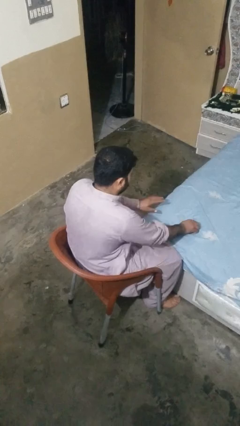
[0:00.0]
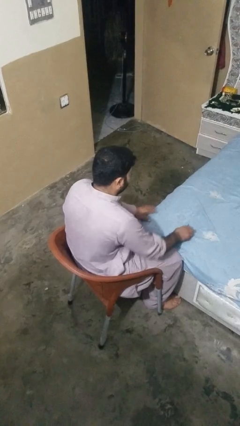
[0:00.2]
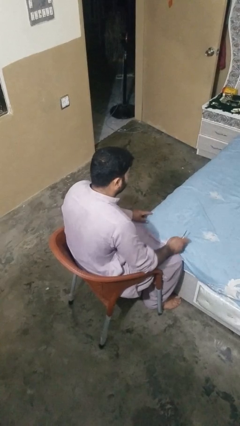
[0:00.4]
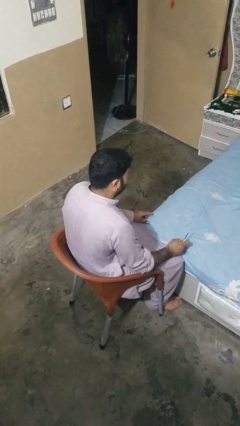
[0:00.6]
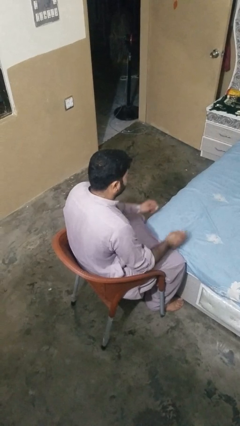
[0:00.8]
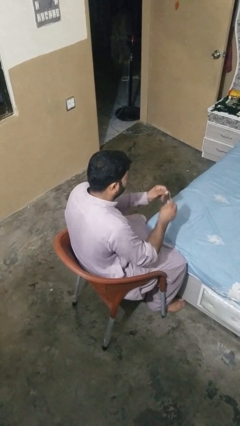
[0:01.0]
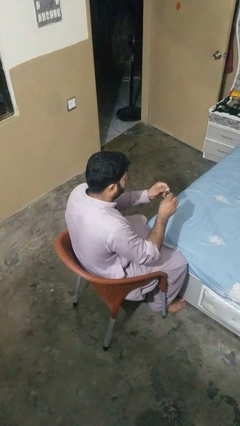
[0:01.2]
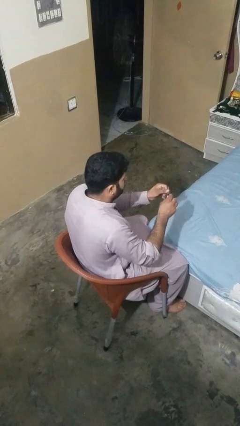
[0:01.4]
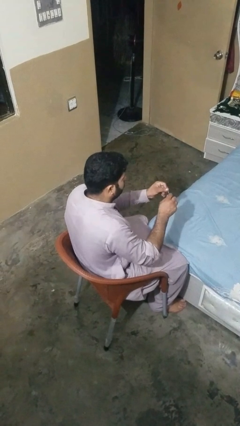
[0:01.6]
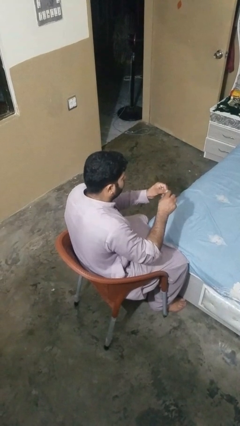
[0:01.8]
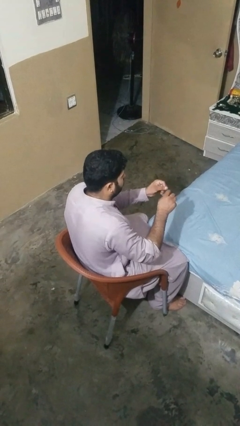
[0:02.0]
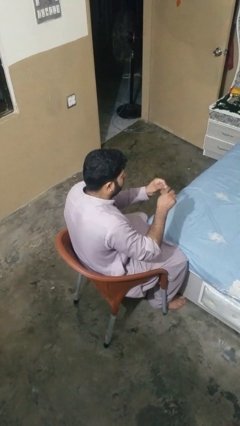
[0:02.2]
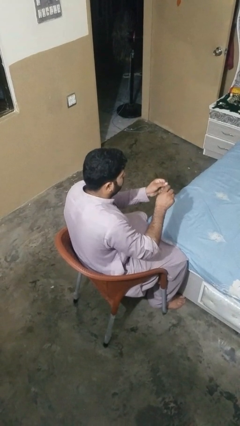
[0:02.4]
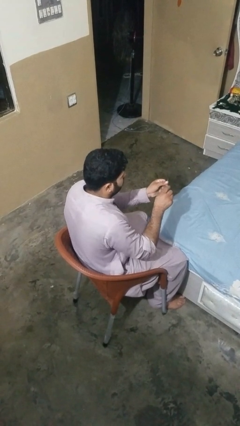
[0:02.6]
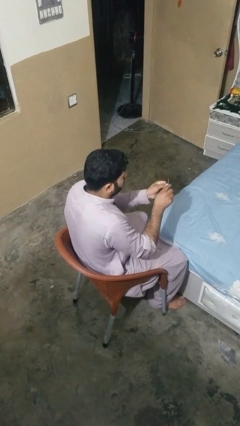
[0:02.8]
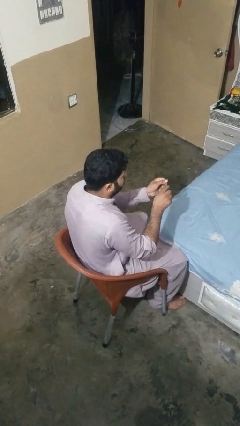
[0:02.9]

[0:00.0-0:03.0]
person files fingernails

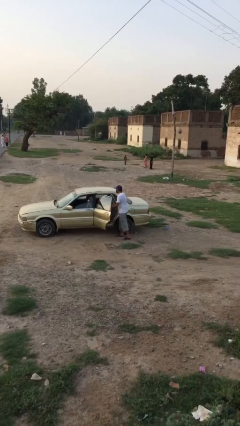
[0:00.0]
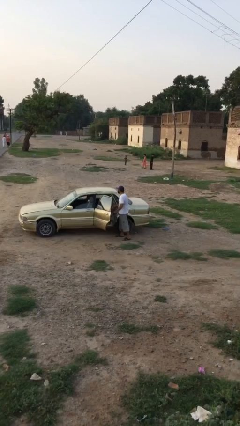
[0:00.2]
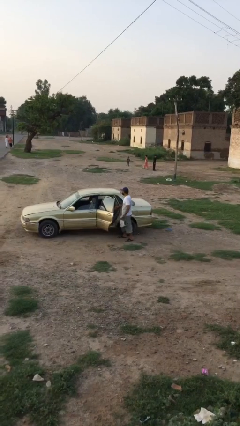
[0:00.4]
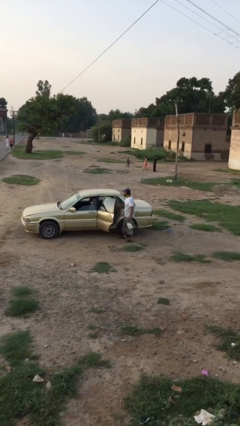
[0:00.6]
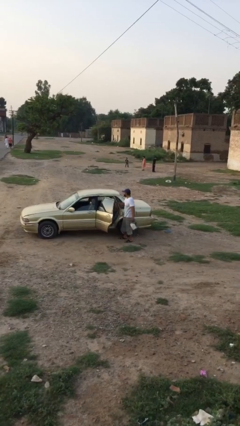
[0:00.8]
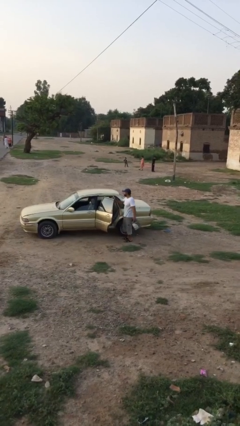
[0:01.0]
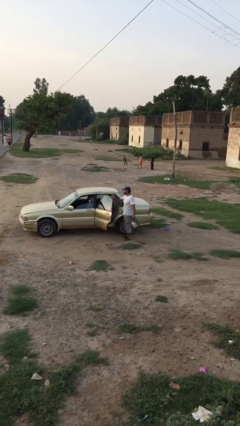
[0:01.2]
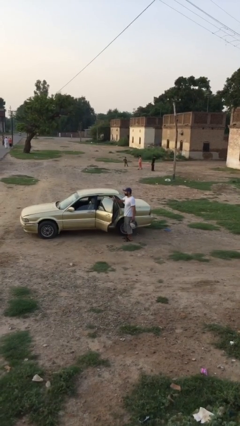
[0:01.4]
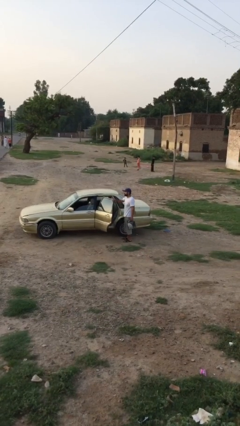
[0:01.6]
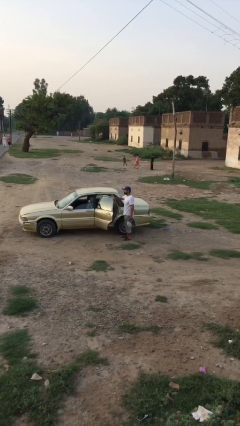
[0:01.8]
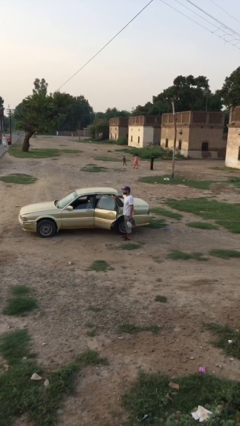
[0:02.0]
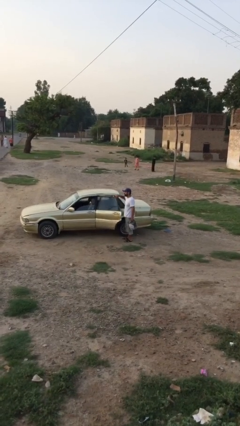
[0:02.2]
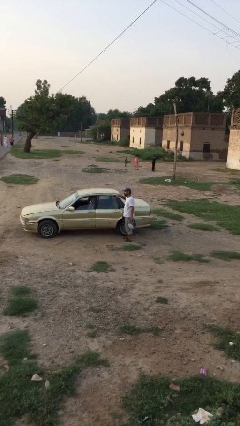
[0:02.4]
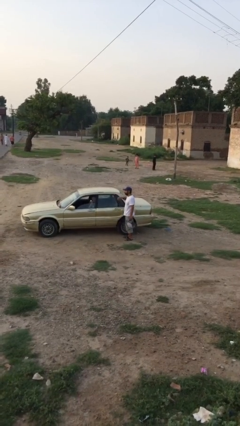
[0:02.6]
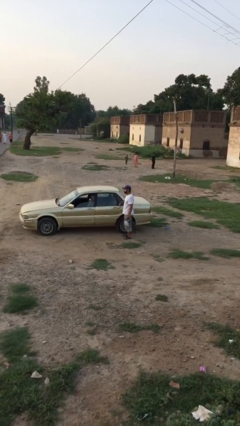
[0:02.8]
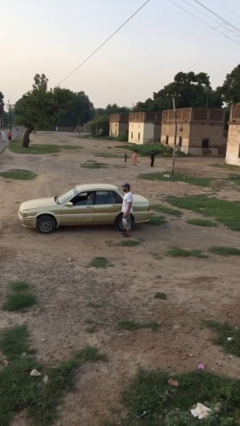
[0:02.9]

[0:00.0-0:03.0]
person closes car door

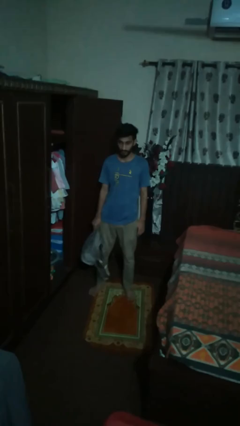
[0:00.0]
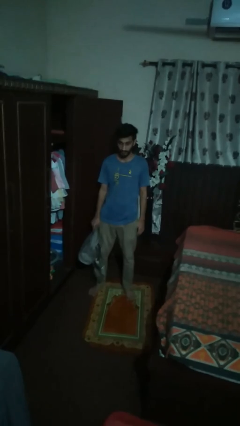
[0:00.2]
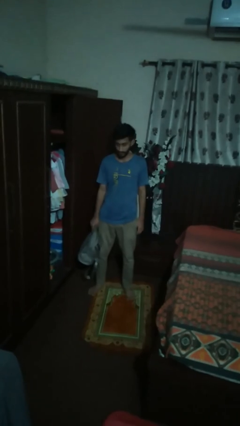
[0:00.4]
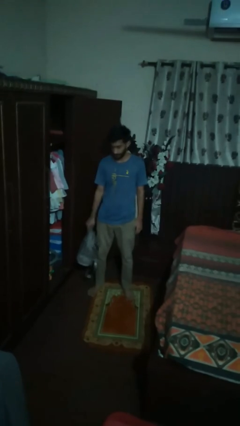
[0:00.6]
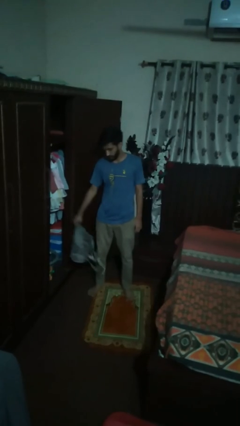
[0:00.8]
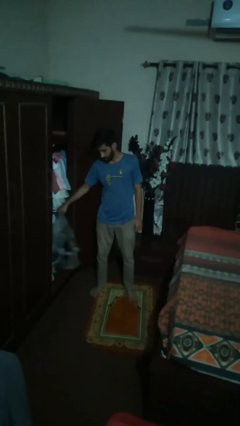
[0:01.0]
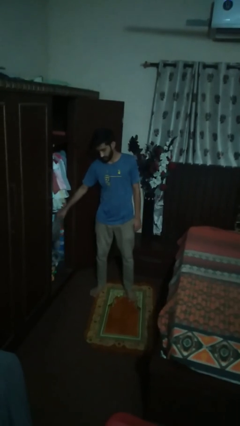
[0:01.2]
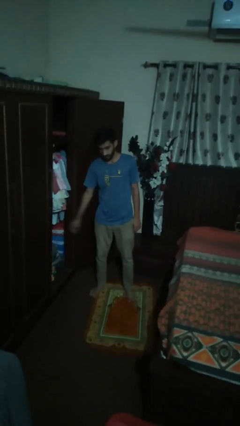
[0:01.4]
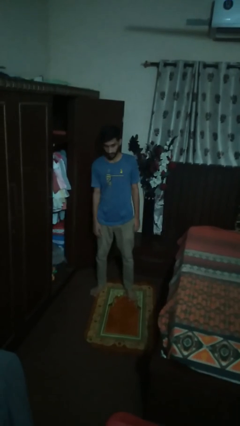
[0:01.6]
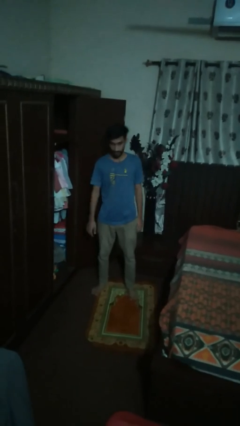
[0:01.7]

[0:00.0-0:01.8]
person puts down object into cabinet

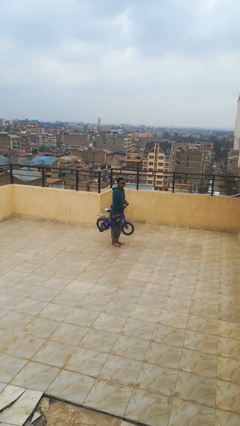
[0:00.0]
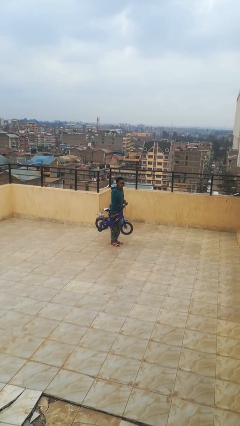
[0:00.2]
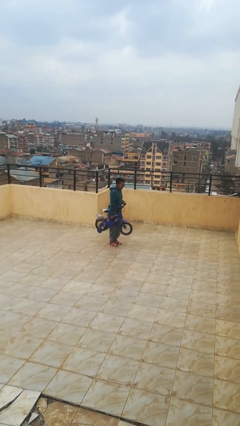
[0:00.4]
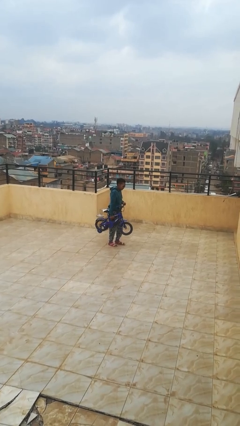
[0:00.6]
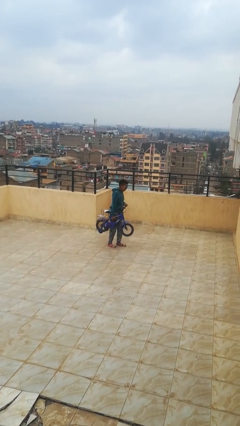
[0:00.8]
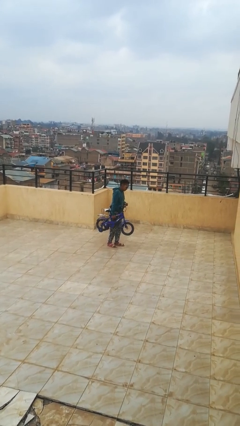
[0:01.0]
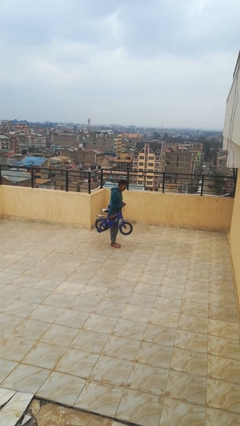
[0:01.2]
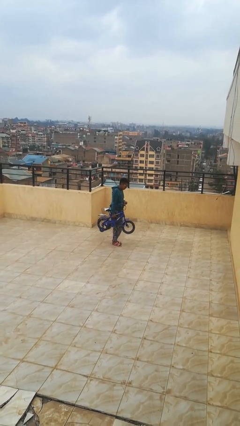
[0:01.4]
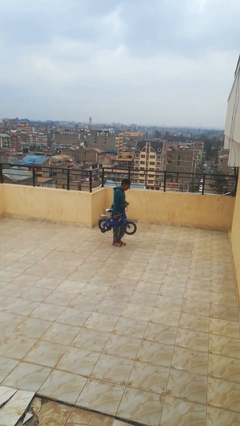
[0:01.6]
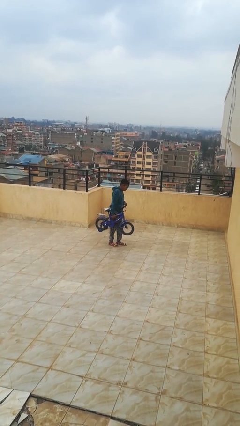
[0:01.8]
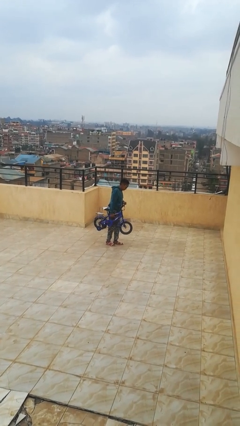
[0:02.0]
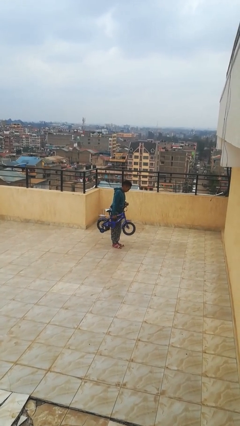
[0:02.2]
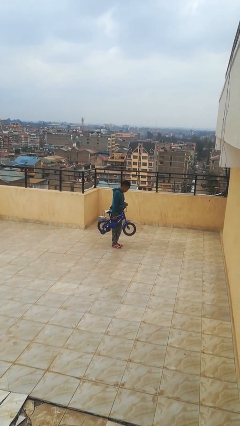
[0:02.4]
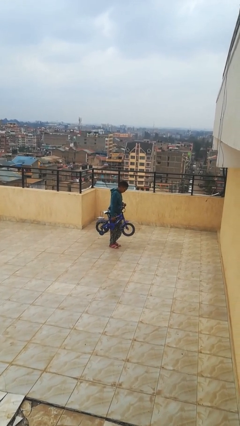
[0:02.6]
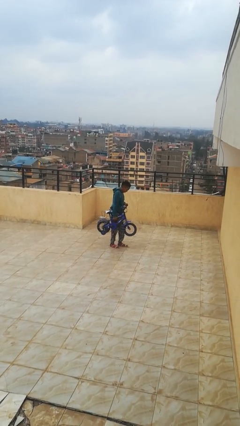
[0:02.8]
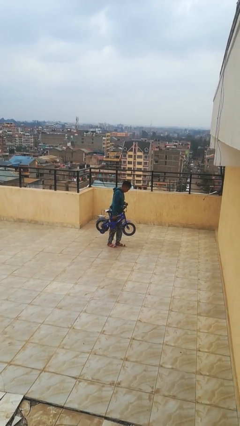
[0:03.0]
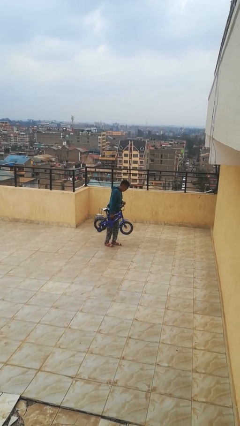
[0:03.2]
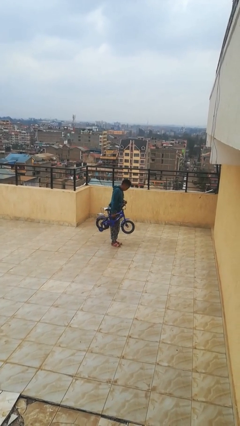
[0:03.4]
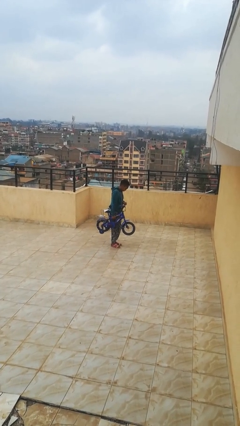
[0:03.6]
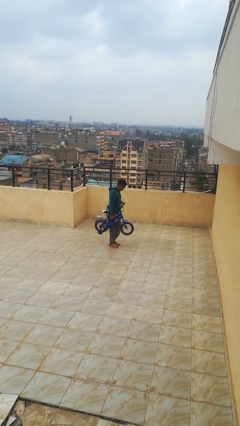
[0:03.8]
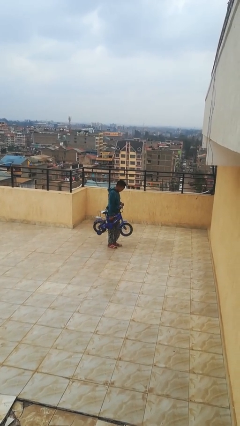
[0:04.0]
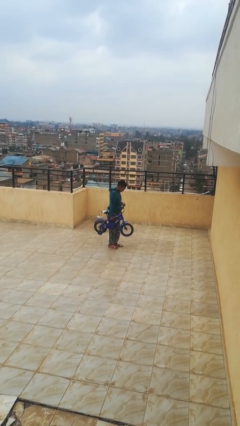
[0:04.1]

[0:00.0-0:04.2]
person carries bicycle

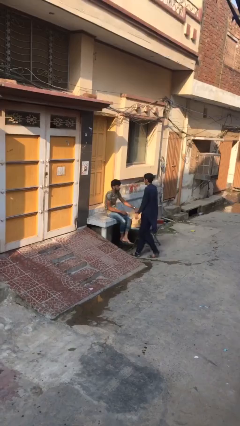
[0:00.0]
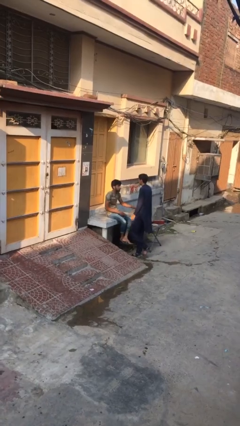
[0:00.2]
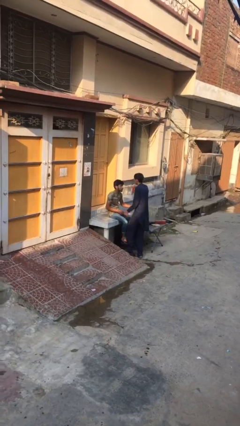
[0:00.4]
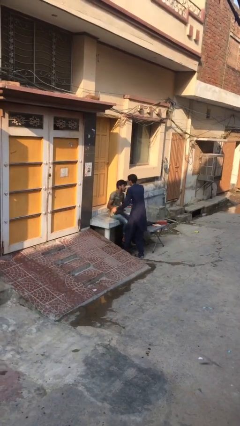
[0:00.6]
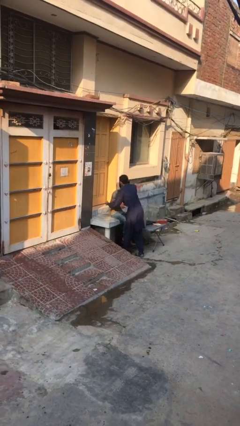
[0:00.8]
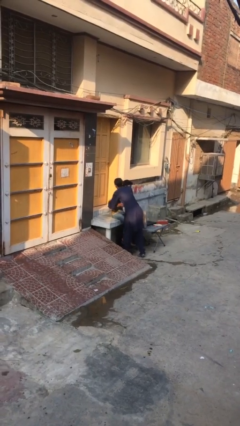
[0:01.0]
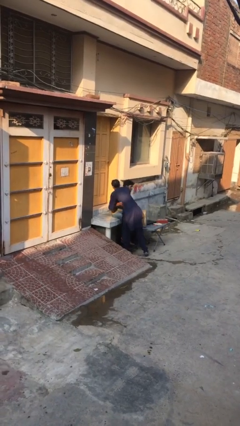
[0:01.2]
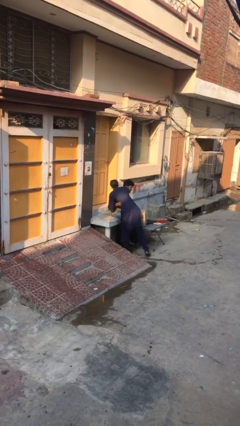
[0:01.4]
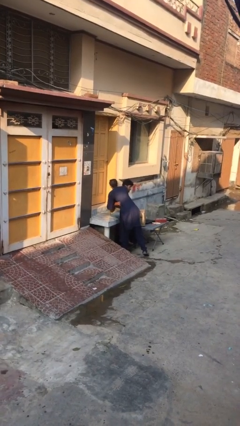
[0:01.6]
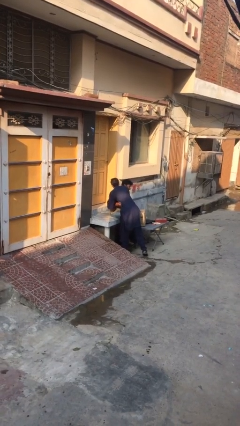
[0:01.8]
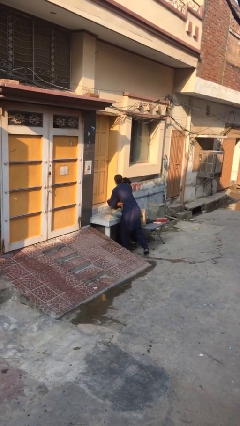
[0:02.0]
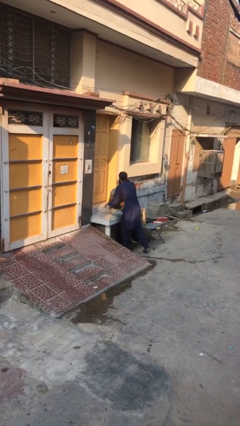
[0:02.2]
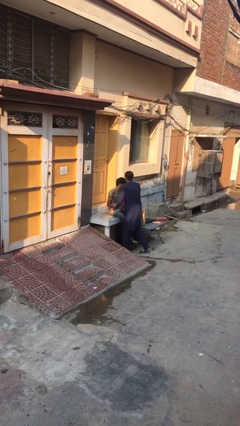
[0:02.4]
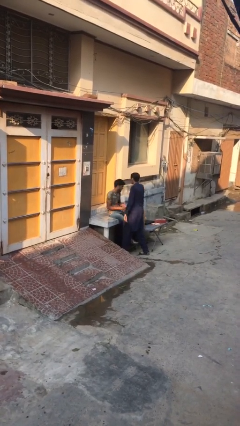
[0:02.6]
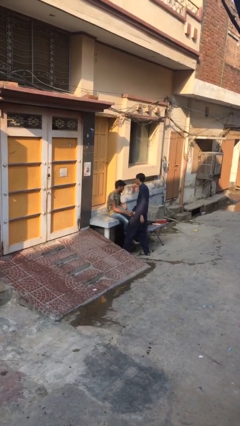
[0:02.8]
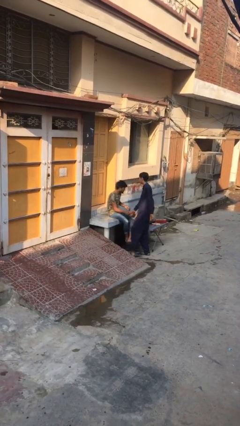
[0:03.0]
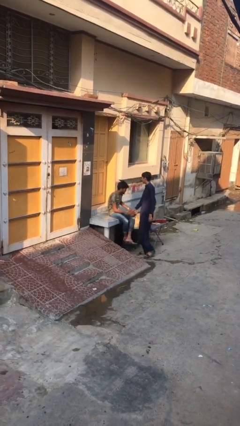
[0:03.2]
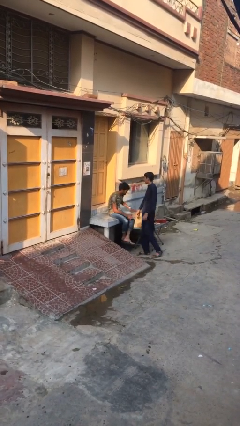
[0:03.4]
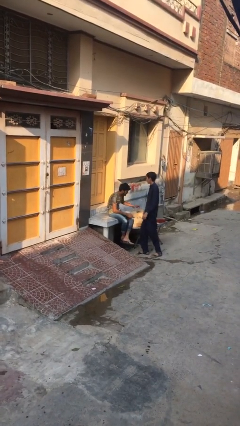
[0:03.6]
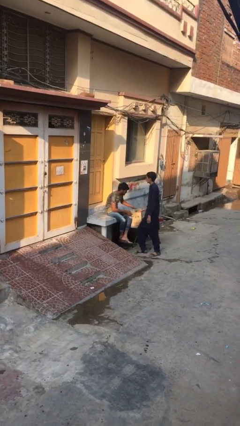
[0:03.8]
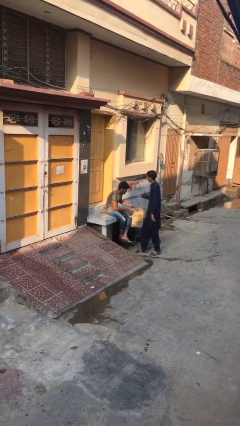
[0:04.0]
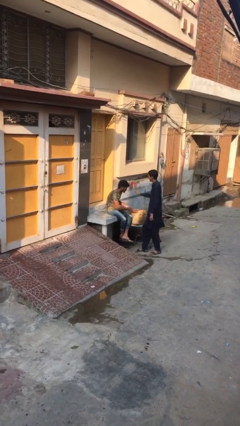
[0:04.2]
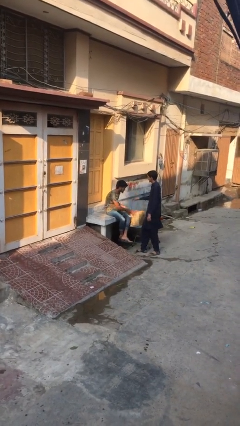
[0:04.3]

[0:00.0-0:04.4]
person embraces person

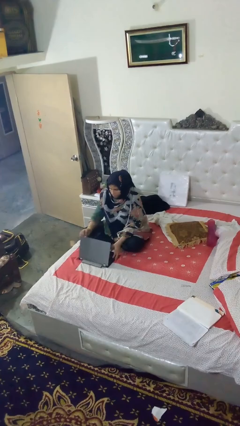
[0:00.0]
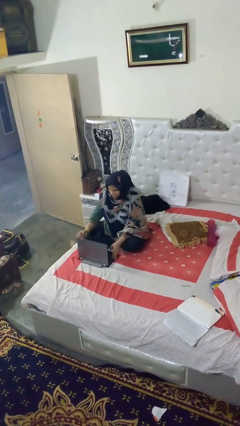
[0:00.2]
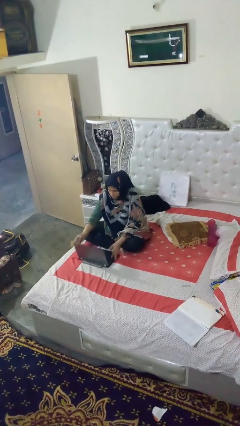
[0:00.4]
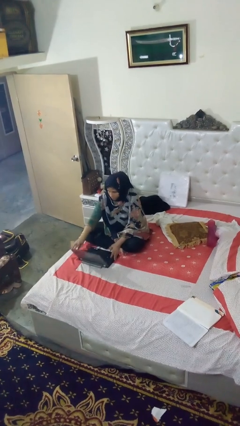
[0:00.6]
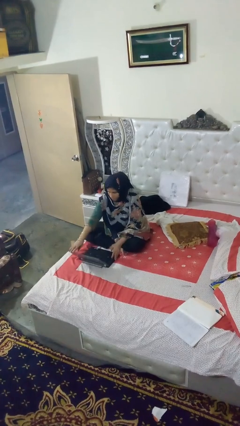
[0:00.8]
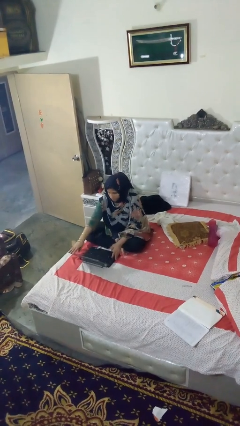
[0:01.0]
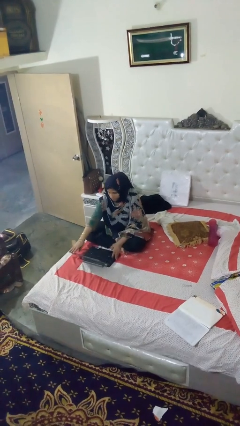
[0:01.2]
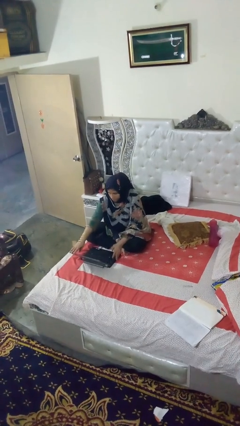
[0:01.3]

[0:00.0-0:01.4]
person opens laptop
